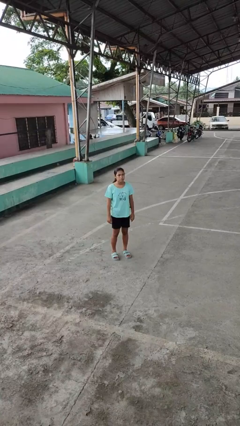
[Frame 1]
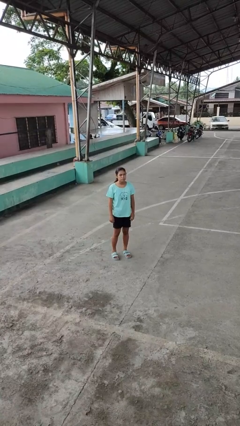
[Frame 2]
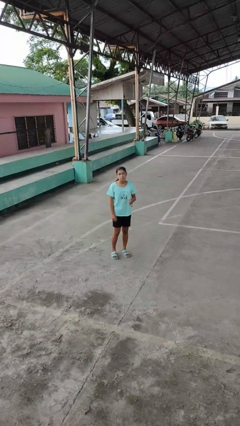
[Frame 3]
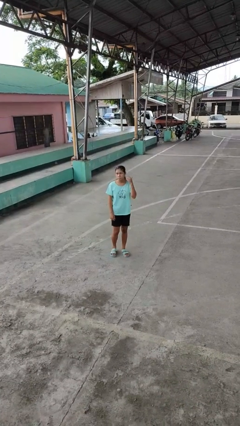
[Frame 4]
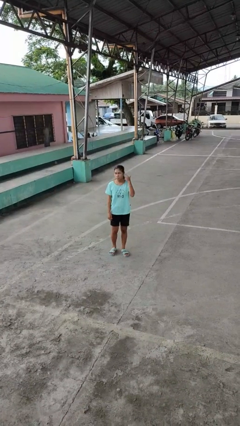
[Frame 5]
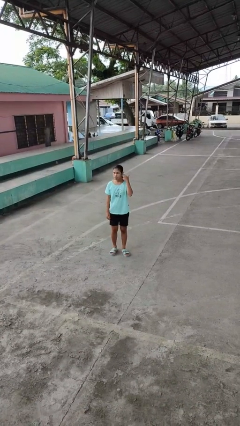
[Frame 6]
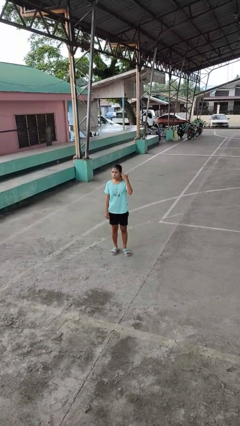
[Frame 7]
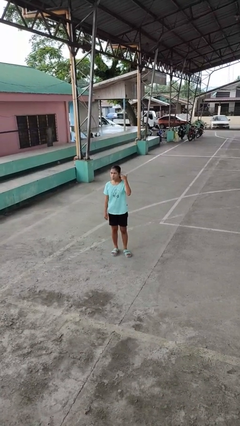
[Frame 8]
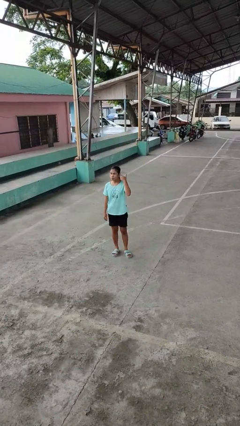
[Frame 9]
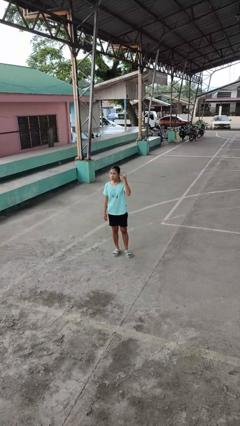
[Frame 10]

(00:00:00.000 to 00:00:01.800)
person gestures listen closely

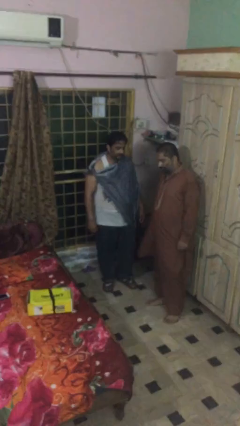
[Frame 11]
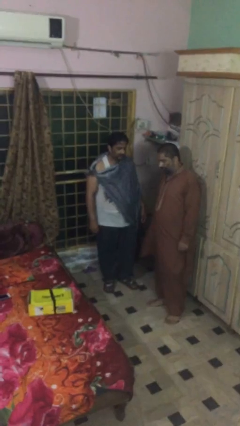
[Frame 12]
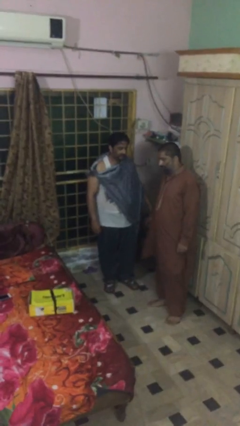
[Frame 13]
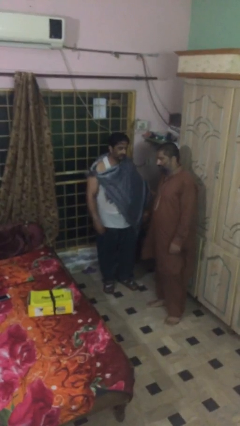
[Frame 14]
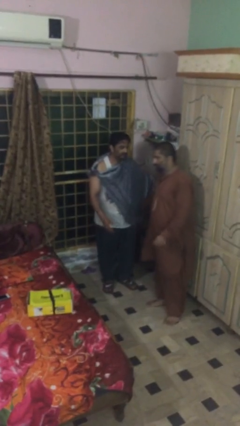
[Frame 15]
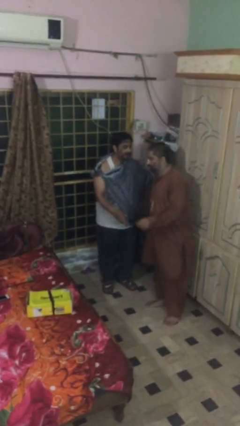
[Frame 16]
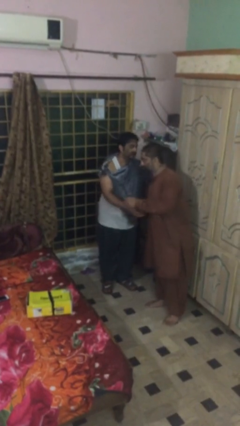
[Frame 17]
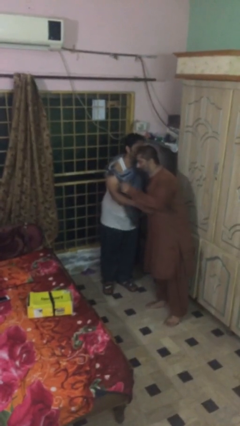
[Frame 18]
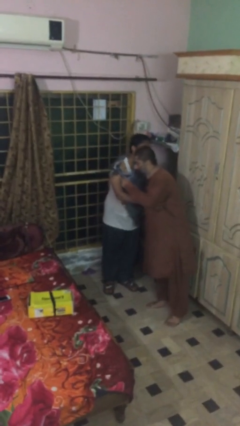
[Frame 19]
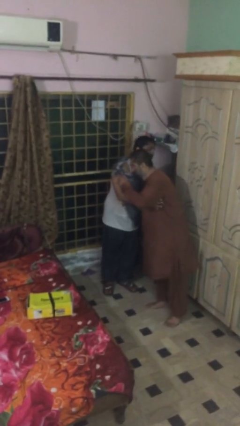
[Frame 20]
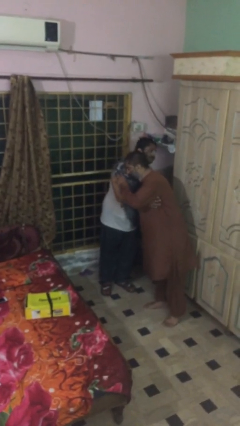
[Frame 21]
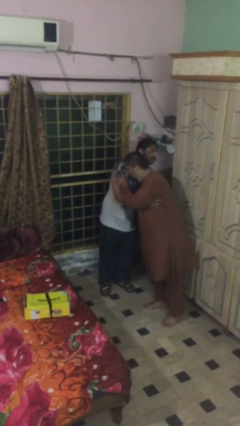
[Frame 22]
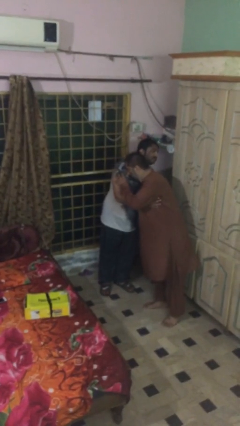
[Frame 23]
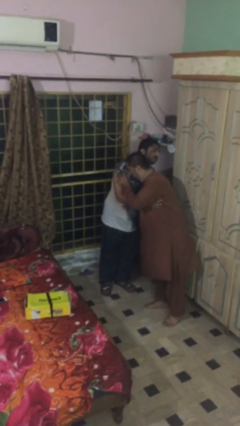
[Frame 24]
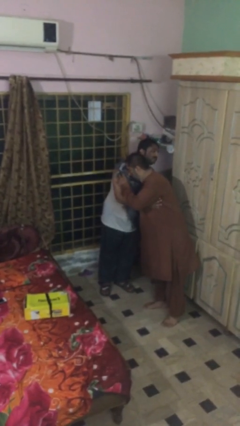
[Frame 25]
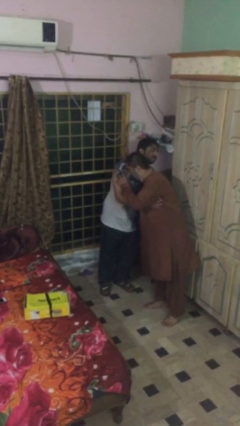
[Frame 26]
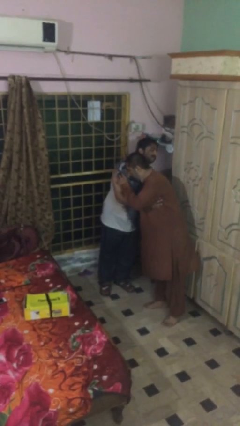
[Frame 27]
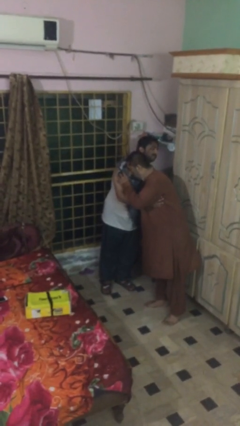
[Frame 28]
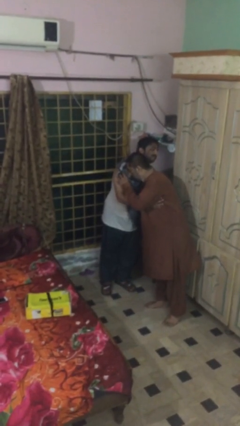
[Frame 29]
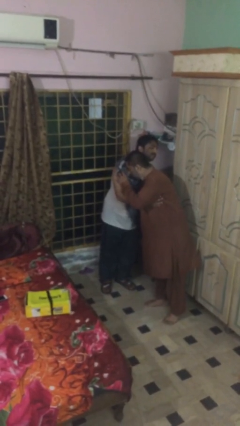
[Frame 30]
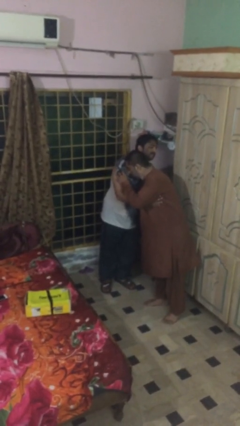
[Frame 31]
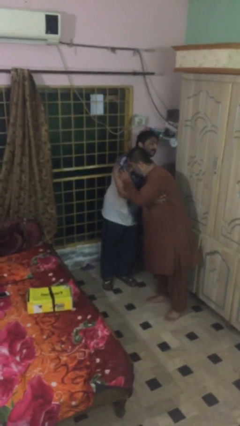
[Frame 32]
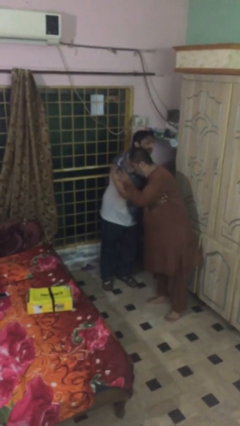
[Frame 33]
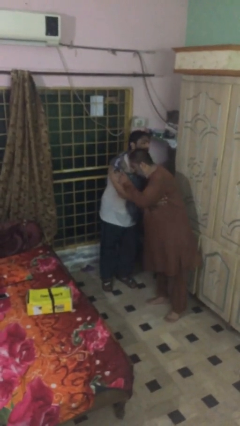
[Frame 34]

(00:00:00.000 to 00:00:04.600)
person embraces person

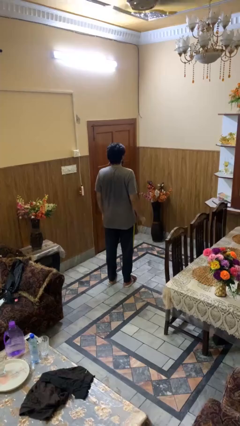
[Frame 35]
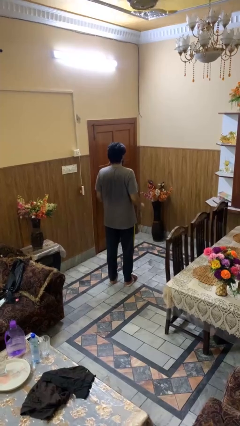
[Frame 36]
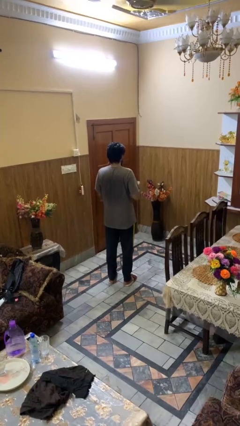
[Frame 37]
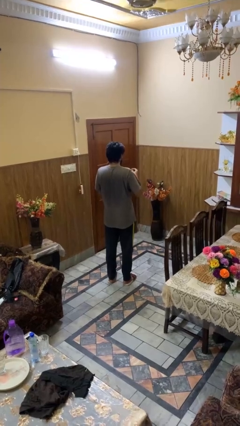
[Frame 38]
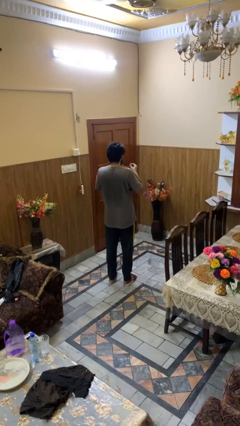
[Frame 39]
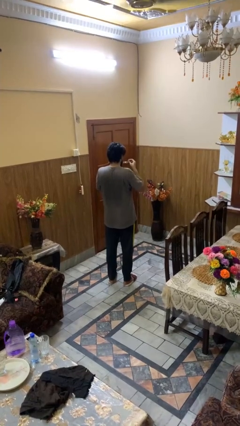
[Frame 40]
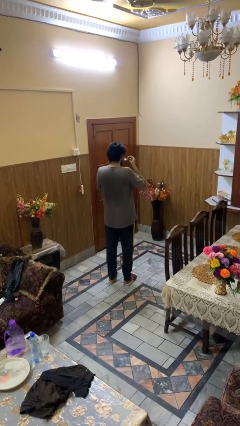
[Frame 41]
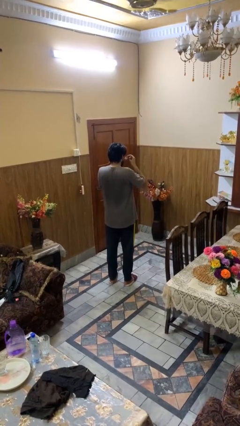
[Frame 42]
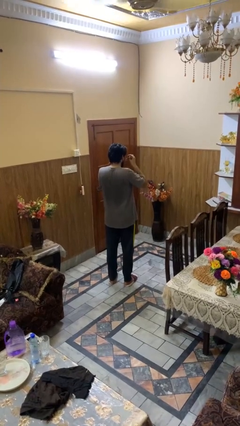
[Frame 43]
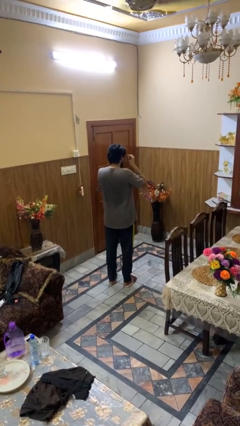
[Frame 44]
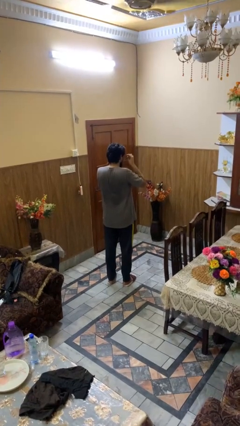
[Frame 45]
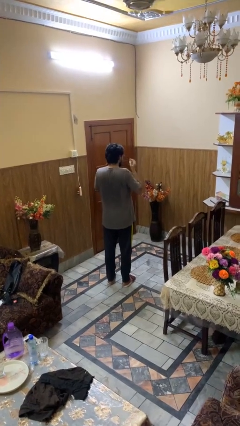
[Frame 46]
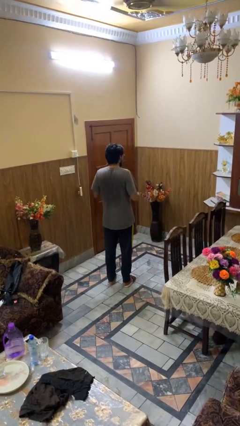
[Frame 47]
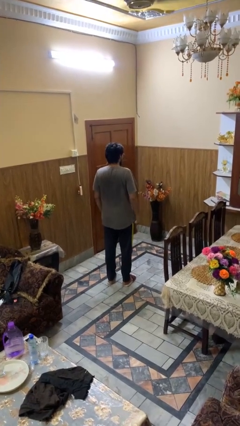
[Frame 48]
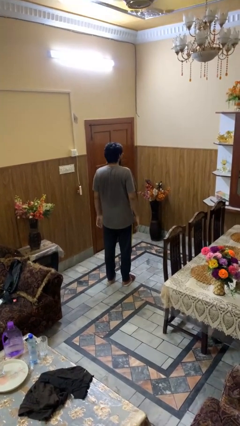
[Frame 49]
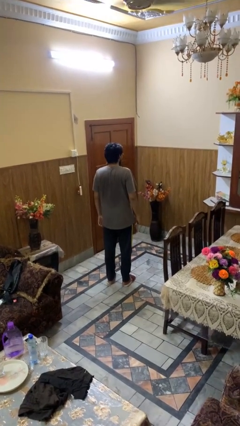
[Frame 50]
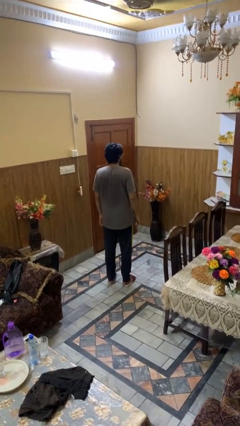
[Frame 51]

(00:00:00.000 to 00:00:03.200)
person puts on glasses

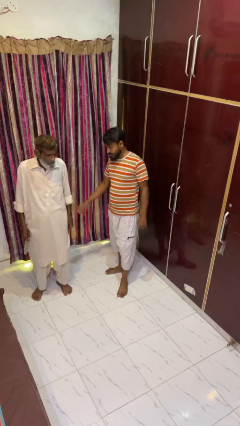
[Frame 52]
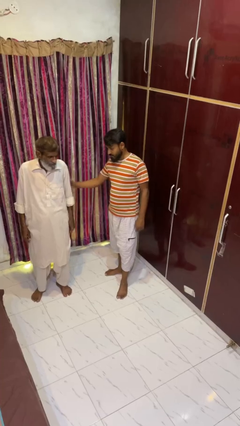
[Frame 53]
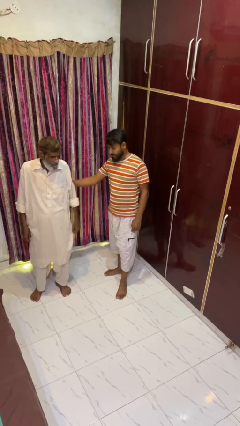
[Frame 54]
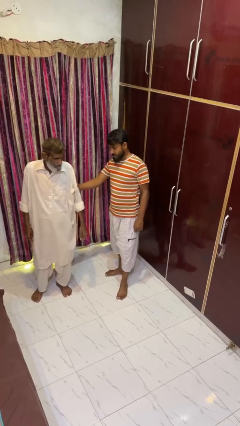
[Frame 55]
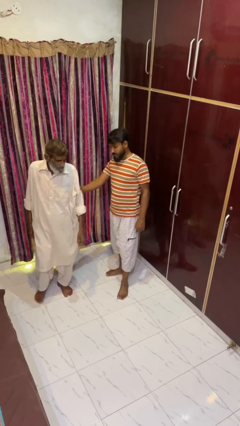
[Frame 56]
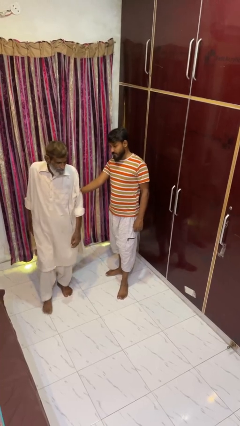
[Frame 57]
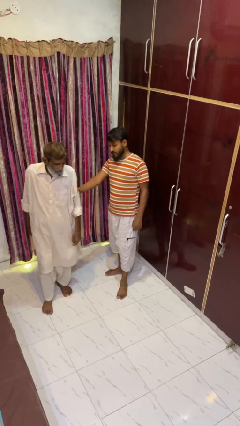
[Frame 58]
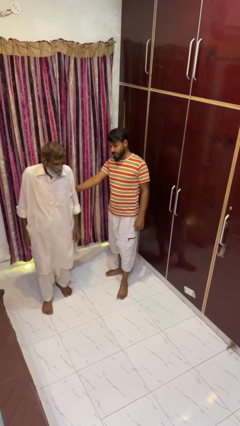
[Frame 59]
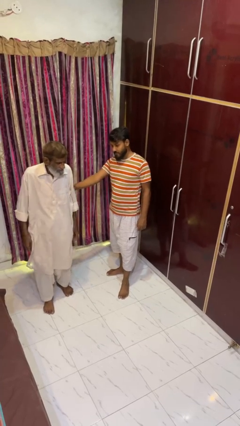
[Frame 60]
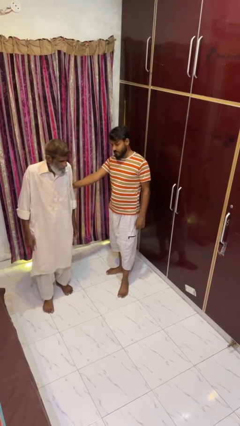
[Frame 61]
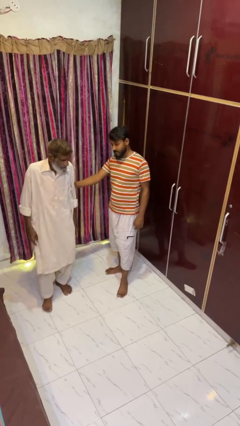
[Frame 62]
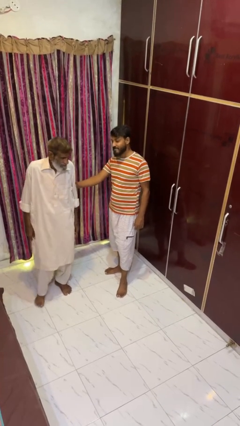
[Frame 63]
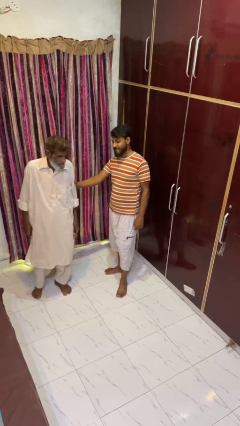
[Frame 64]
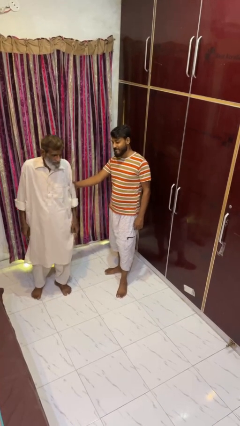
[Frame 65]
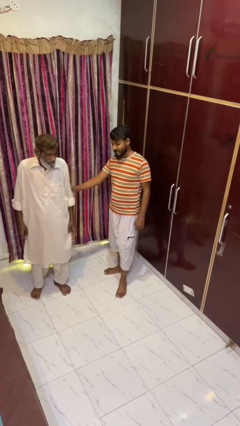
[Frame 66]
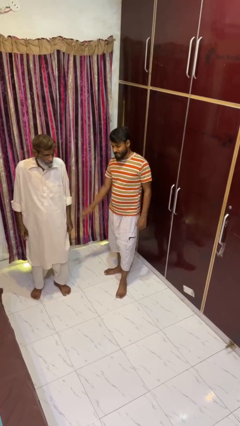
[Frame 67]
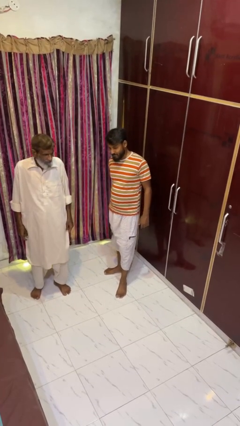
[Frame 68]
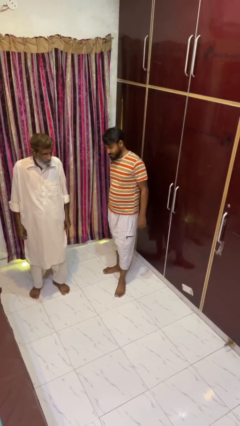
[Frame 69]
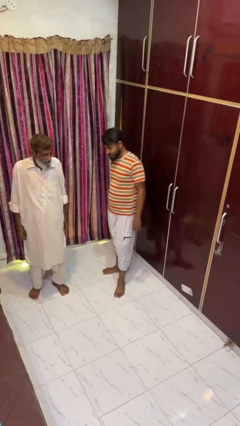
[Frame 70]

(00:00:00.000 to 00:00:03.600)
person grabs person by bicep

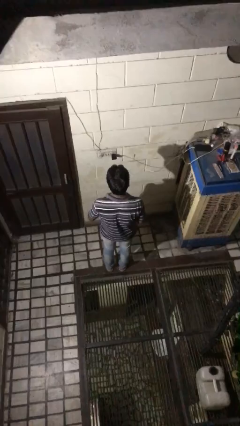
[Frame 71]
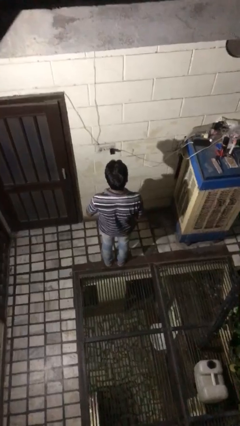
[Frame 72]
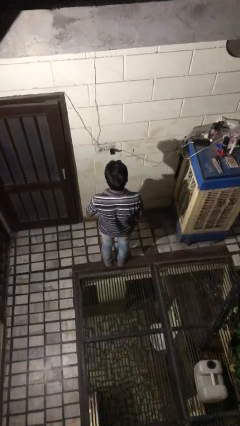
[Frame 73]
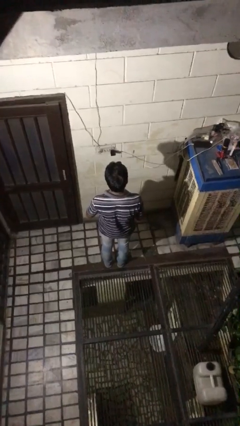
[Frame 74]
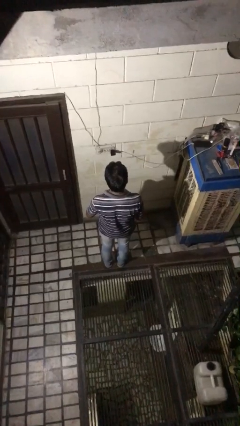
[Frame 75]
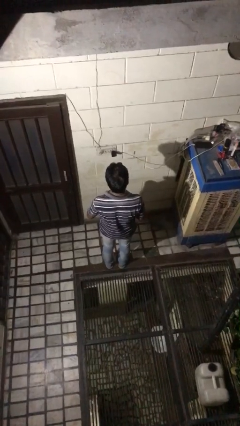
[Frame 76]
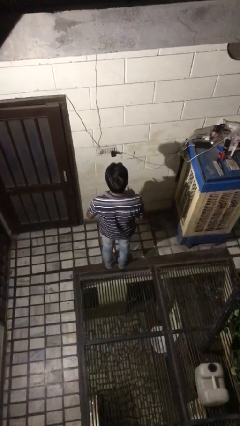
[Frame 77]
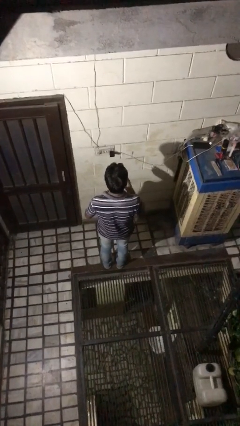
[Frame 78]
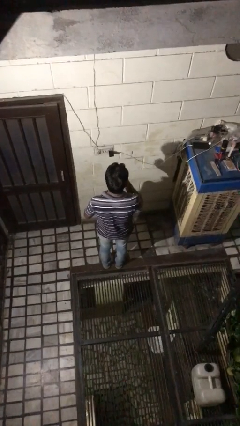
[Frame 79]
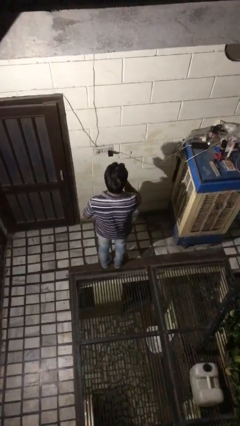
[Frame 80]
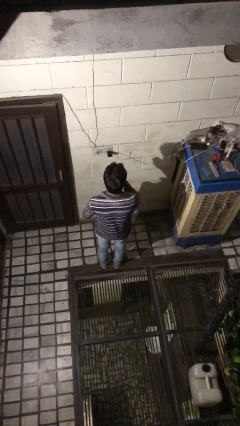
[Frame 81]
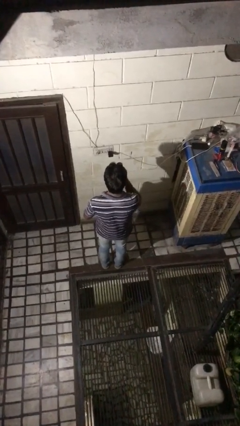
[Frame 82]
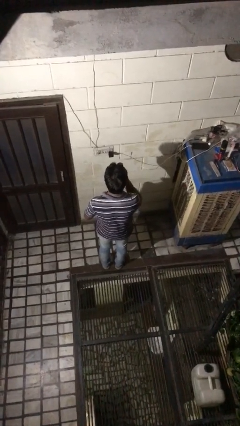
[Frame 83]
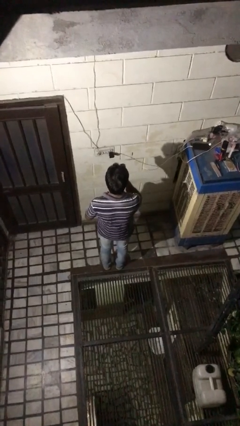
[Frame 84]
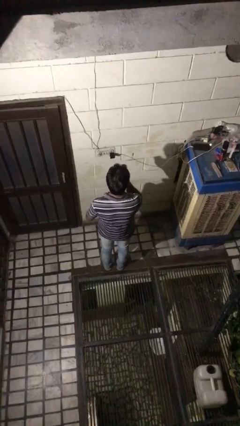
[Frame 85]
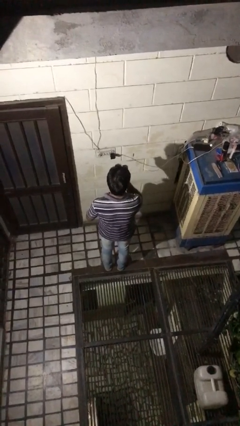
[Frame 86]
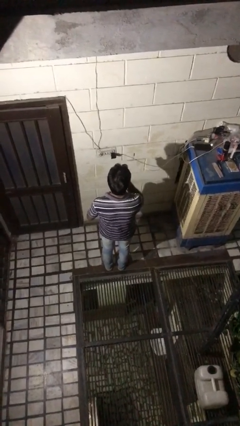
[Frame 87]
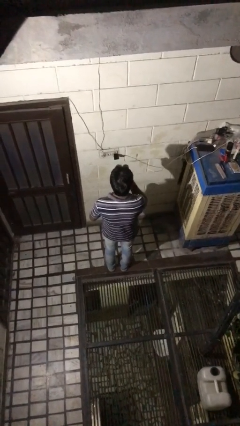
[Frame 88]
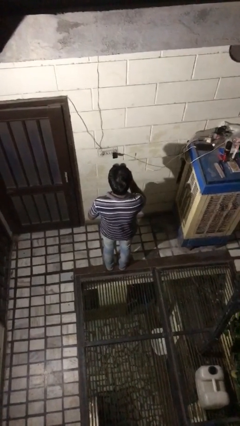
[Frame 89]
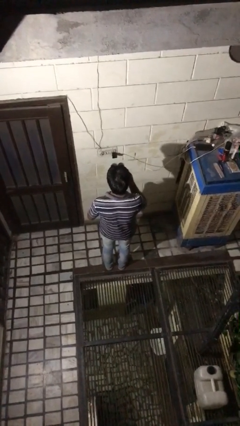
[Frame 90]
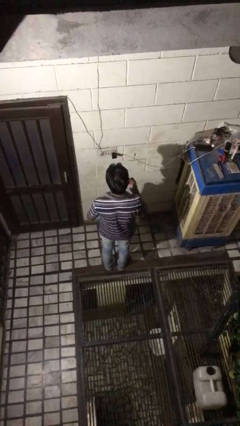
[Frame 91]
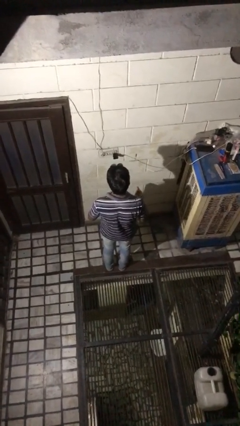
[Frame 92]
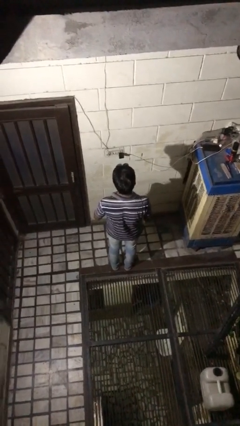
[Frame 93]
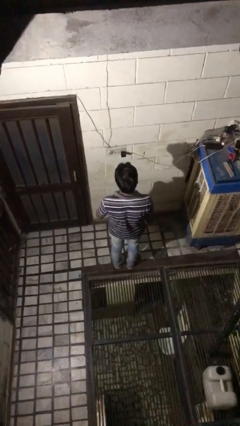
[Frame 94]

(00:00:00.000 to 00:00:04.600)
person applies lip makeup
